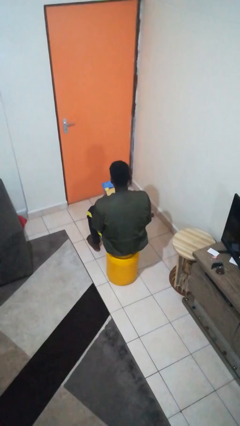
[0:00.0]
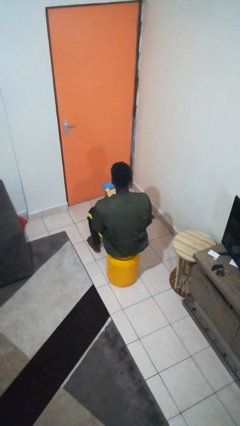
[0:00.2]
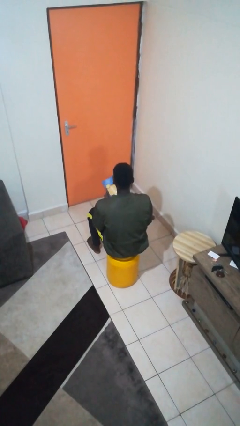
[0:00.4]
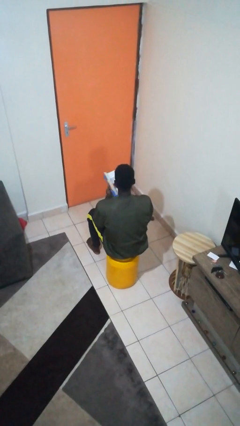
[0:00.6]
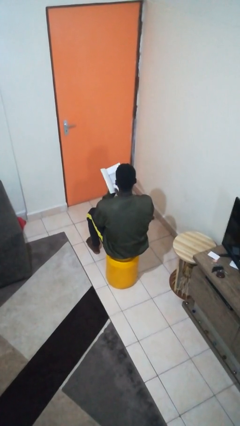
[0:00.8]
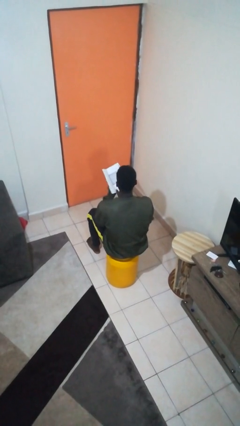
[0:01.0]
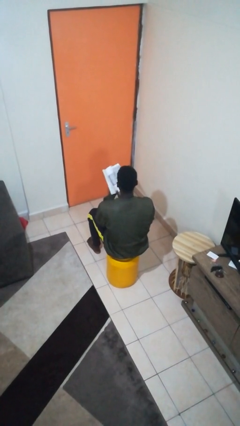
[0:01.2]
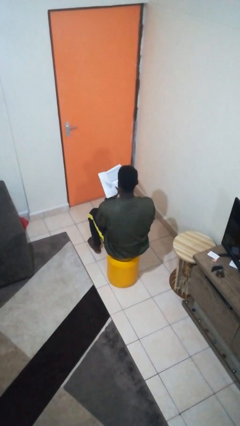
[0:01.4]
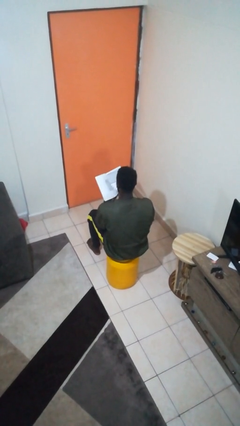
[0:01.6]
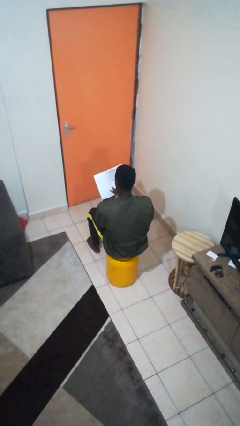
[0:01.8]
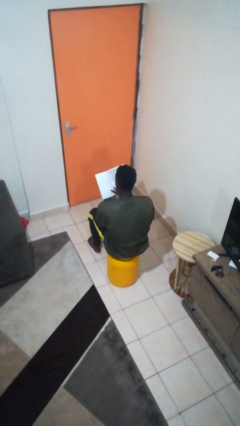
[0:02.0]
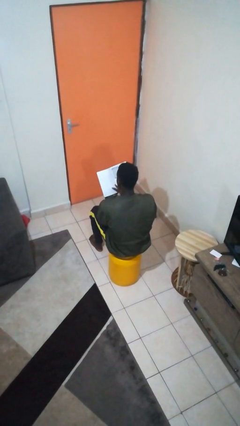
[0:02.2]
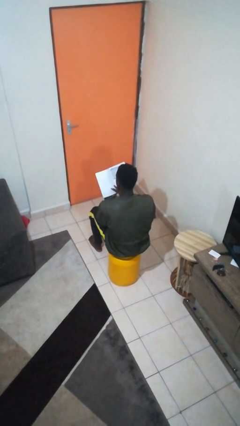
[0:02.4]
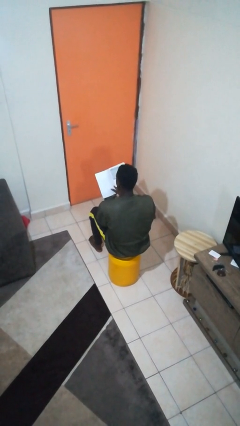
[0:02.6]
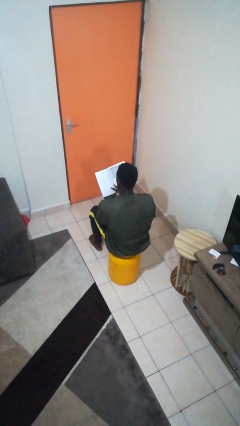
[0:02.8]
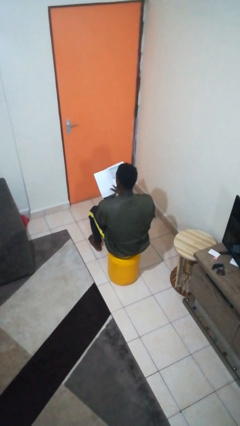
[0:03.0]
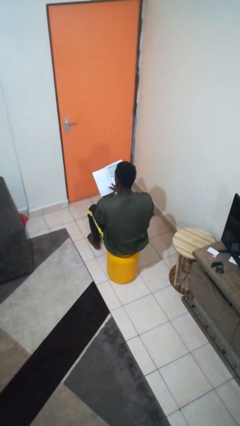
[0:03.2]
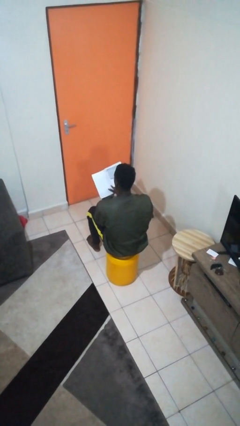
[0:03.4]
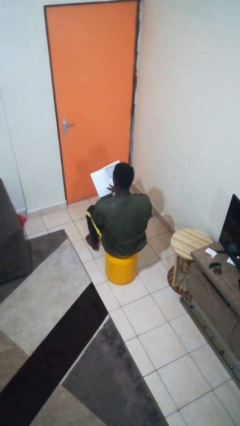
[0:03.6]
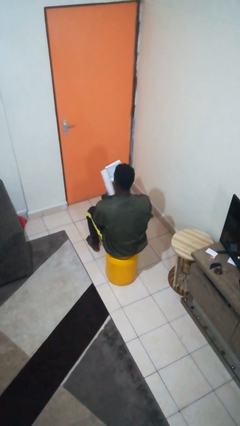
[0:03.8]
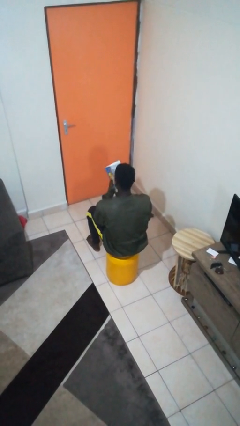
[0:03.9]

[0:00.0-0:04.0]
person reads book

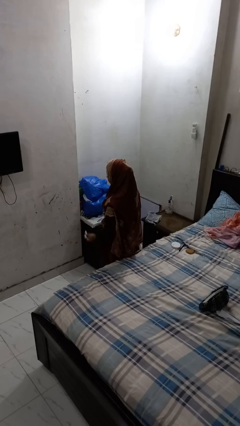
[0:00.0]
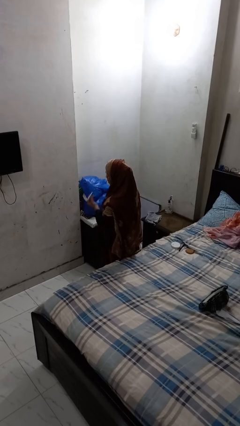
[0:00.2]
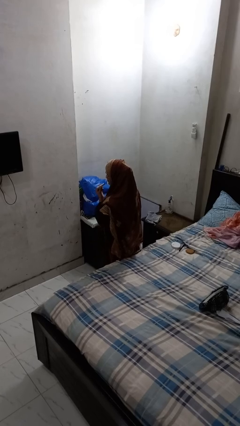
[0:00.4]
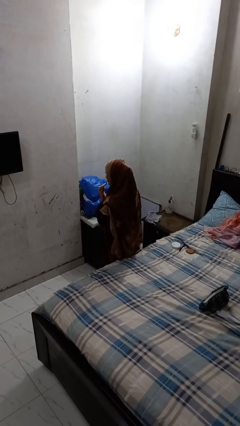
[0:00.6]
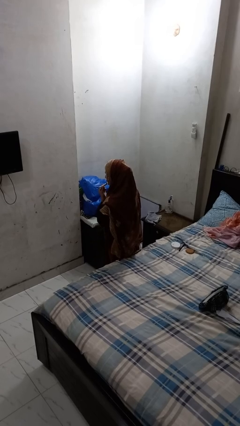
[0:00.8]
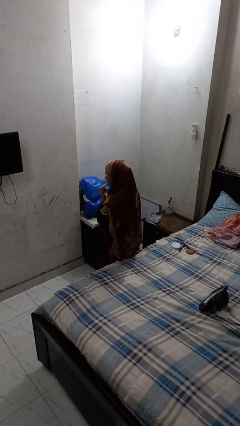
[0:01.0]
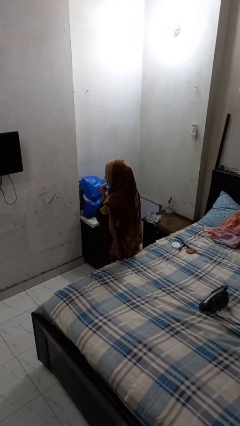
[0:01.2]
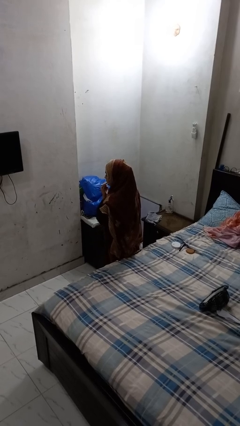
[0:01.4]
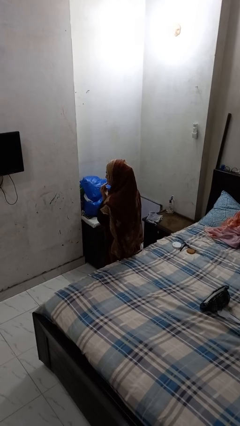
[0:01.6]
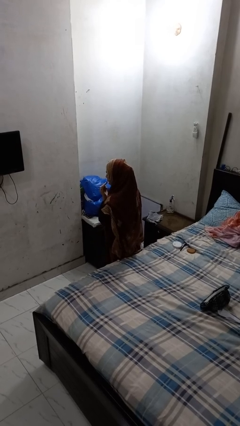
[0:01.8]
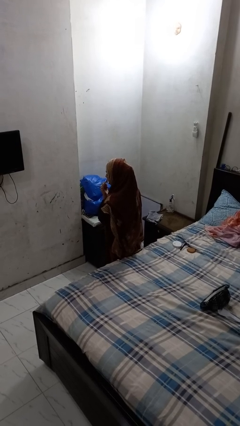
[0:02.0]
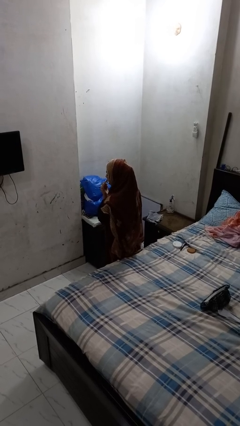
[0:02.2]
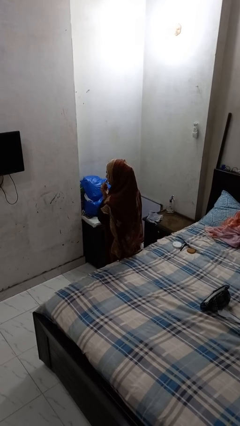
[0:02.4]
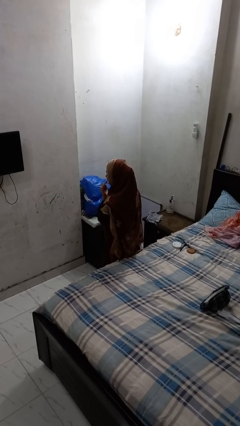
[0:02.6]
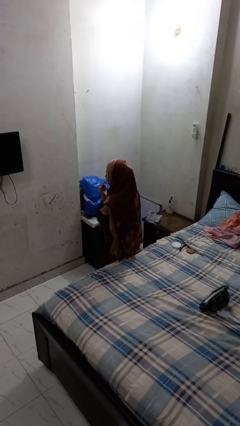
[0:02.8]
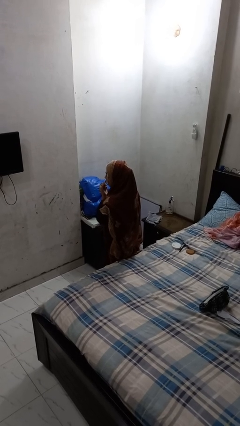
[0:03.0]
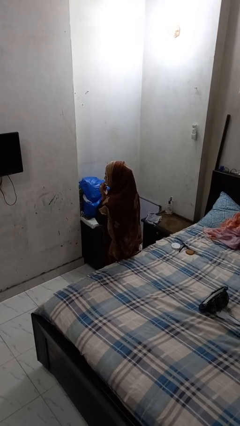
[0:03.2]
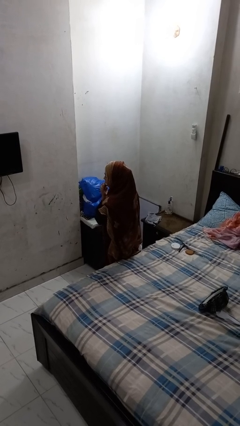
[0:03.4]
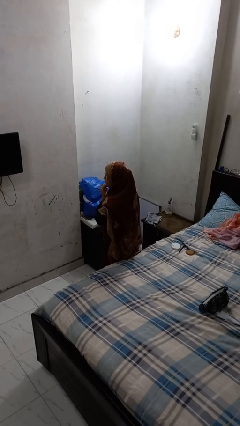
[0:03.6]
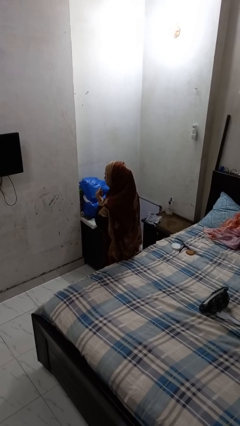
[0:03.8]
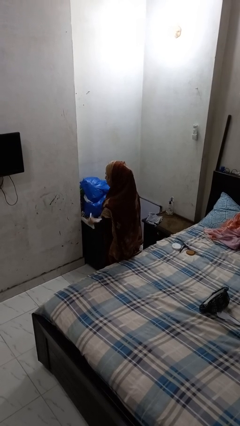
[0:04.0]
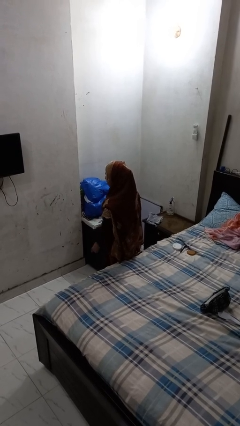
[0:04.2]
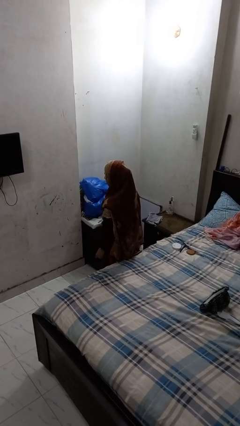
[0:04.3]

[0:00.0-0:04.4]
person applies lip makeup

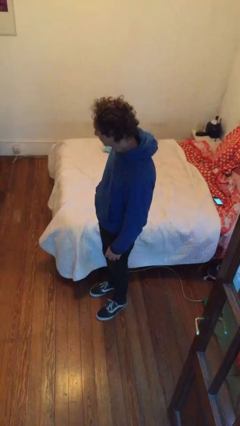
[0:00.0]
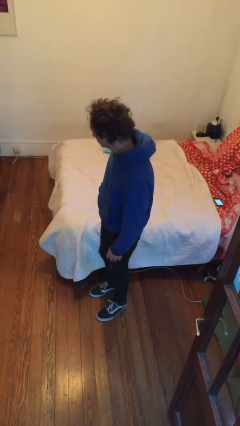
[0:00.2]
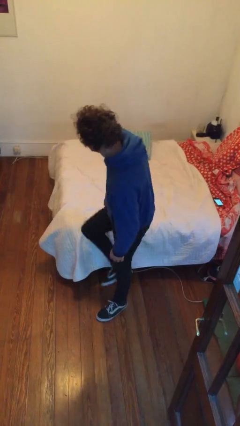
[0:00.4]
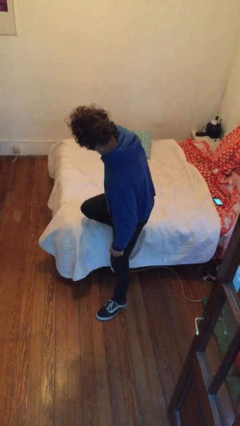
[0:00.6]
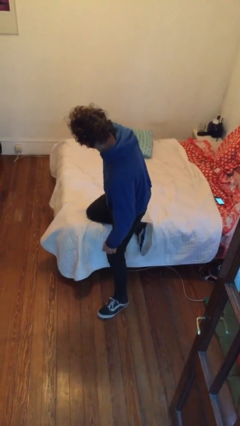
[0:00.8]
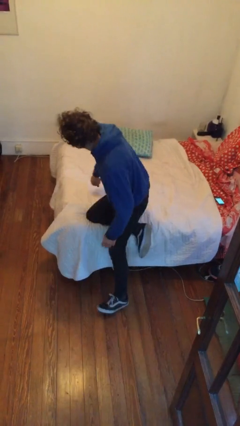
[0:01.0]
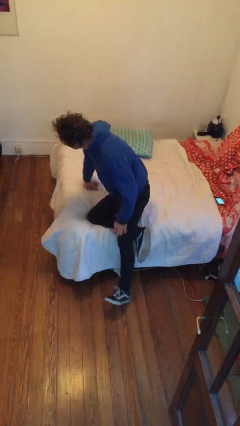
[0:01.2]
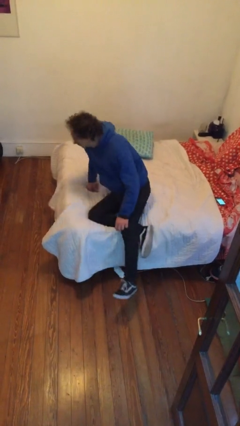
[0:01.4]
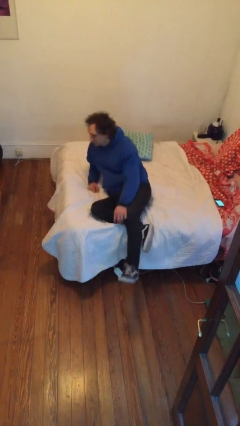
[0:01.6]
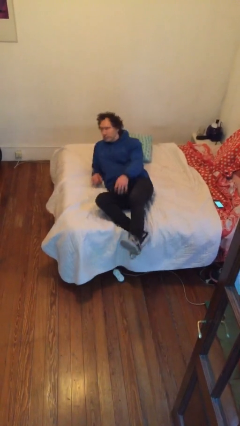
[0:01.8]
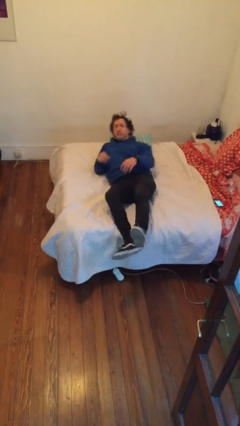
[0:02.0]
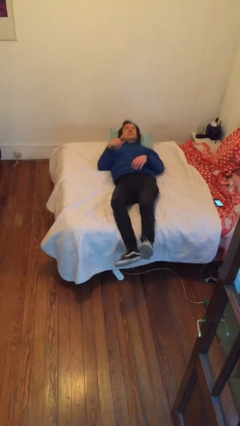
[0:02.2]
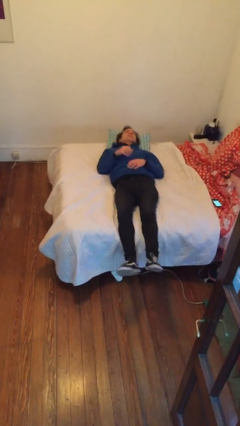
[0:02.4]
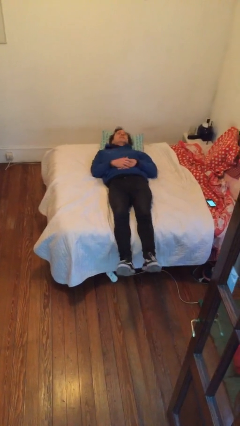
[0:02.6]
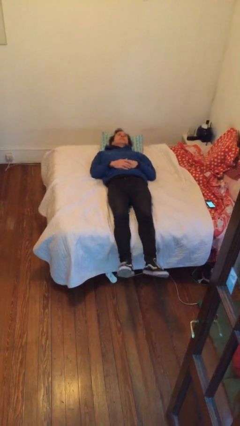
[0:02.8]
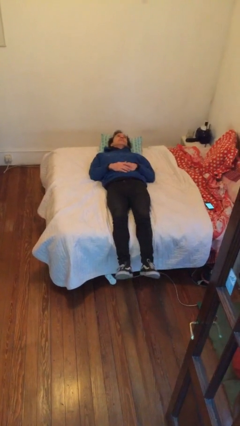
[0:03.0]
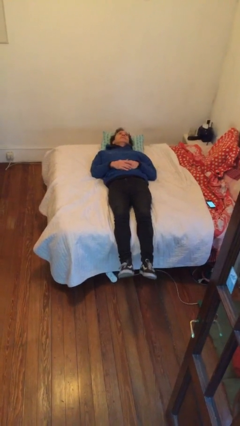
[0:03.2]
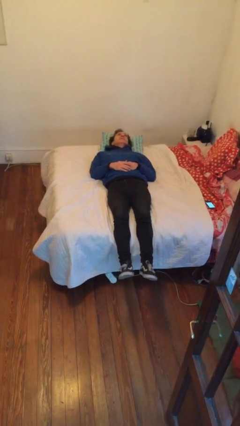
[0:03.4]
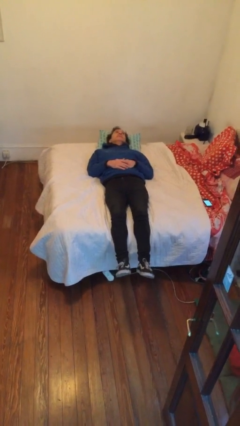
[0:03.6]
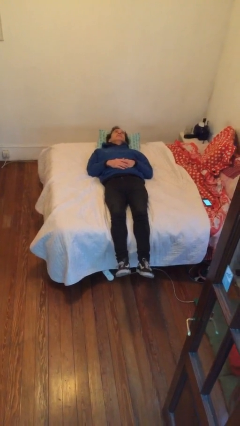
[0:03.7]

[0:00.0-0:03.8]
person lies down on bed

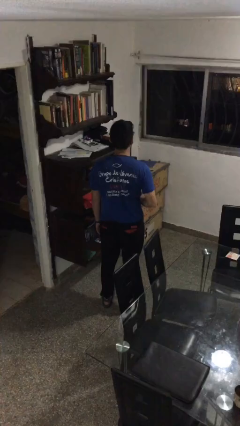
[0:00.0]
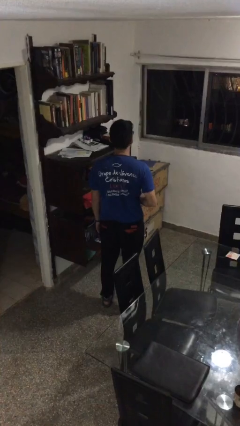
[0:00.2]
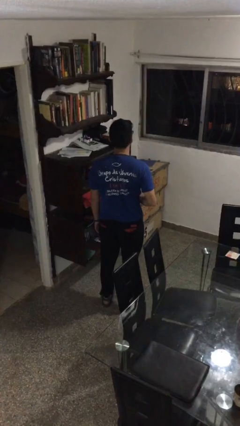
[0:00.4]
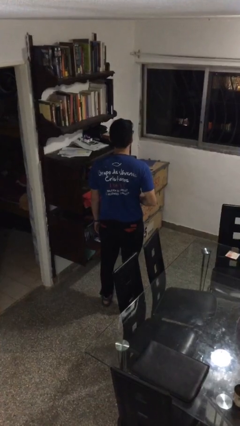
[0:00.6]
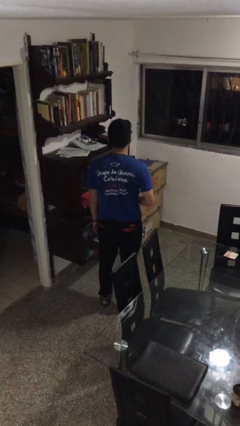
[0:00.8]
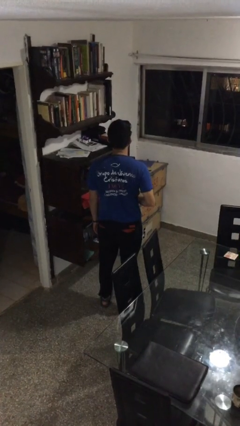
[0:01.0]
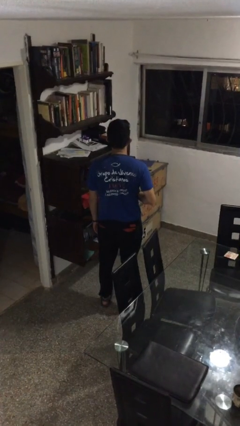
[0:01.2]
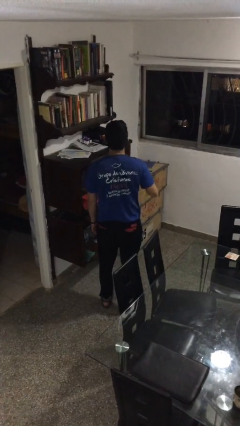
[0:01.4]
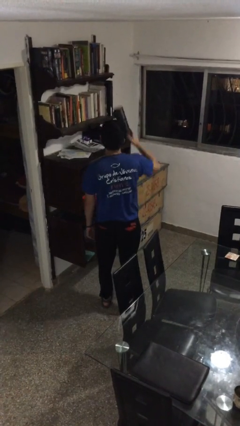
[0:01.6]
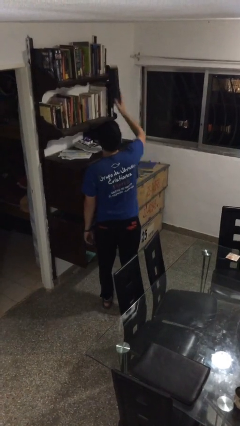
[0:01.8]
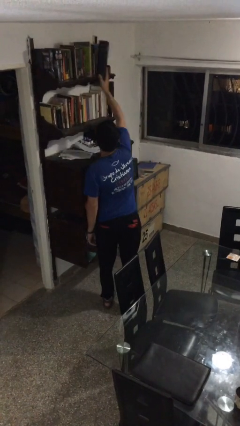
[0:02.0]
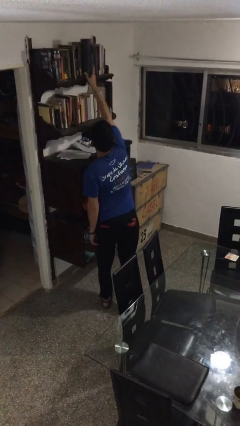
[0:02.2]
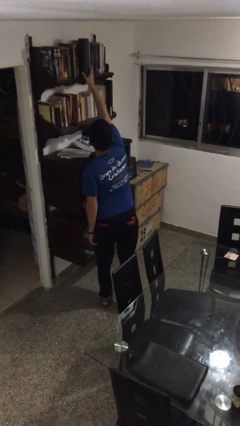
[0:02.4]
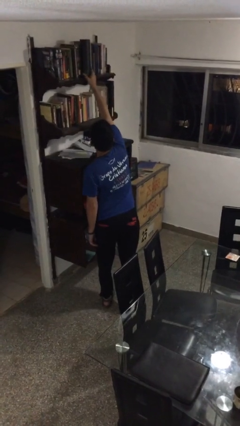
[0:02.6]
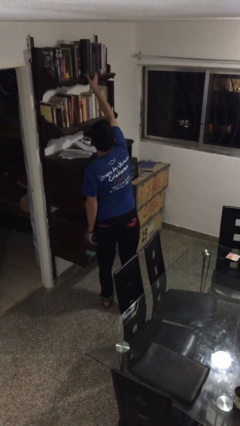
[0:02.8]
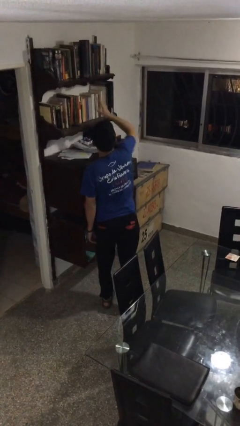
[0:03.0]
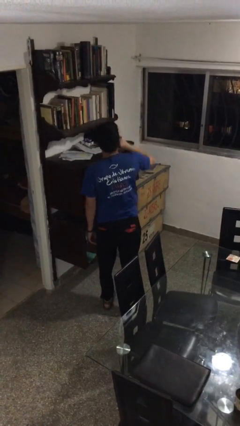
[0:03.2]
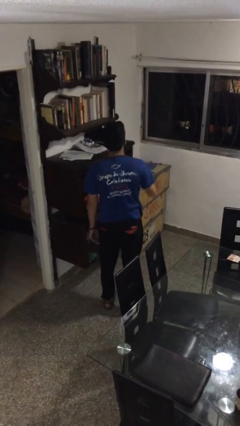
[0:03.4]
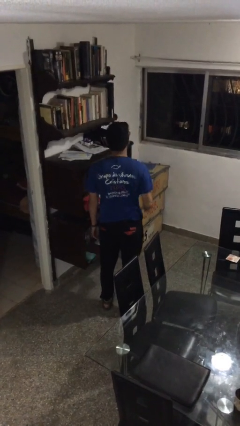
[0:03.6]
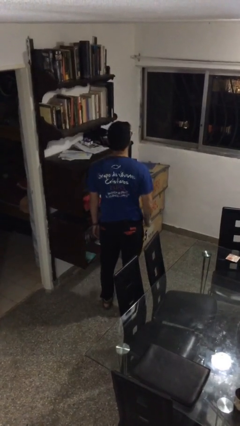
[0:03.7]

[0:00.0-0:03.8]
person puts down object on shelf

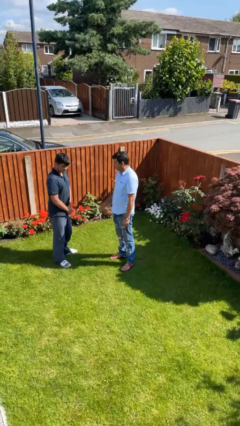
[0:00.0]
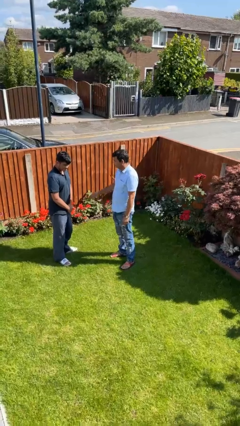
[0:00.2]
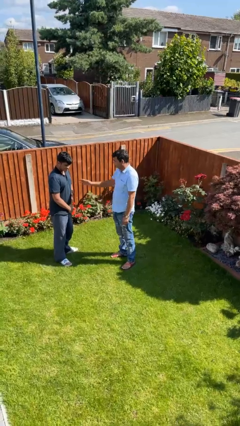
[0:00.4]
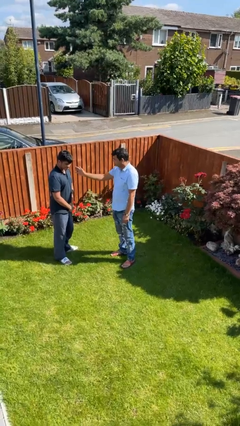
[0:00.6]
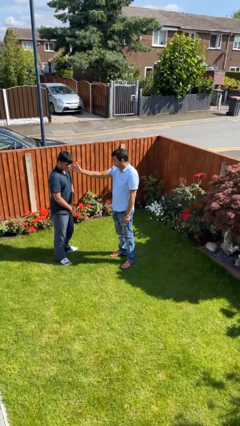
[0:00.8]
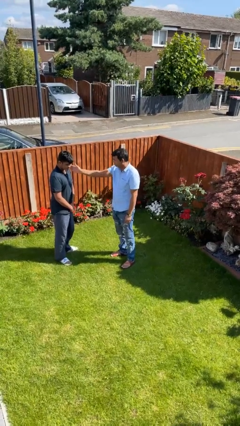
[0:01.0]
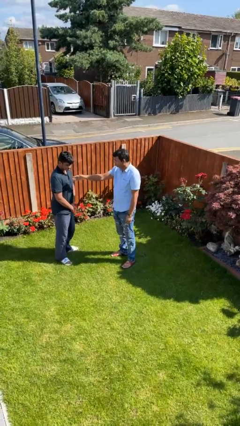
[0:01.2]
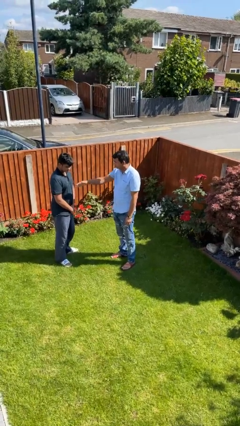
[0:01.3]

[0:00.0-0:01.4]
person touches face of person

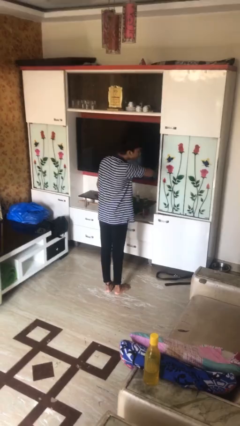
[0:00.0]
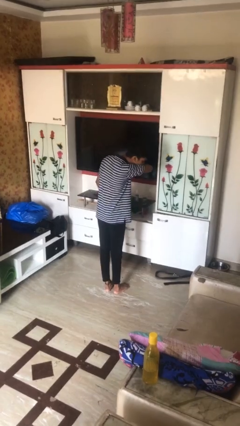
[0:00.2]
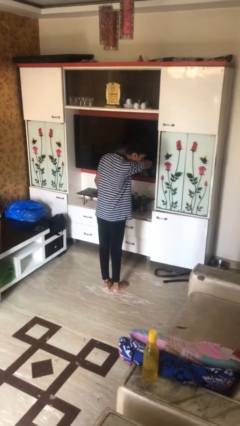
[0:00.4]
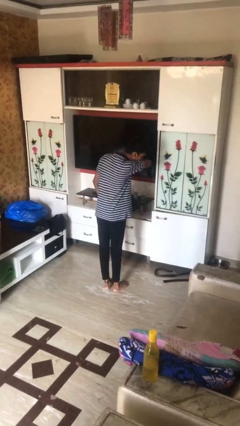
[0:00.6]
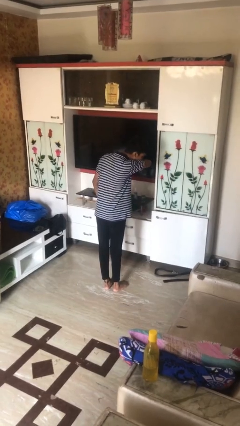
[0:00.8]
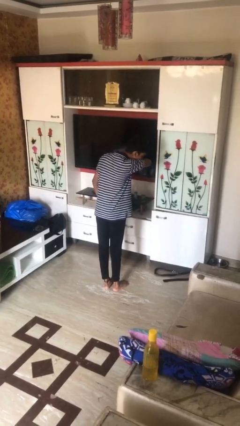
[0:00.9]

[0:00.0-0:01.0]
person sneezes into arm
